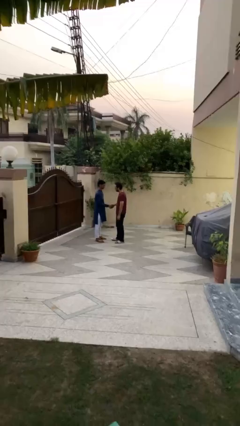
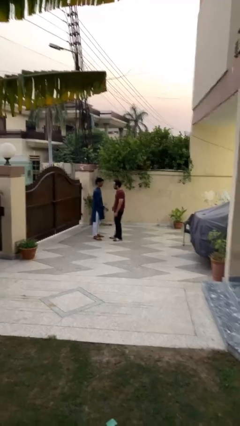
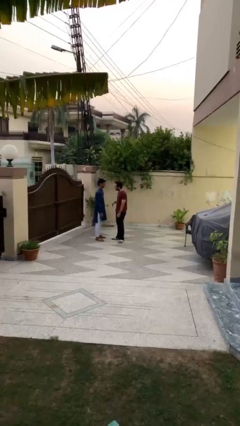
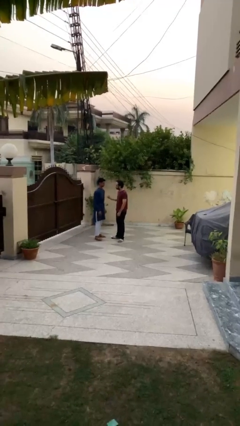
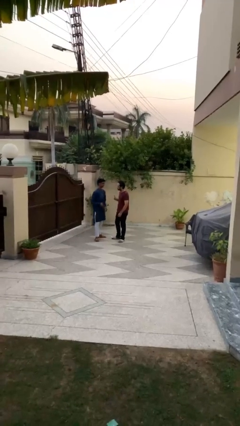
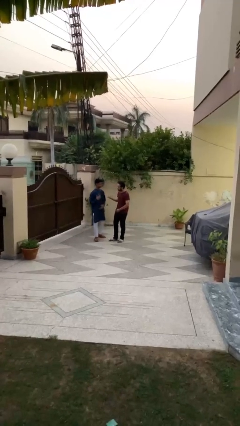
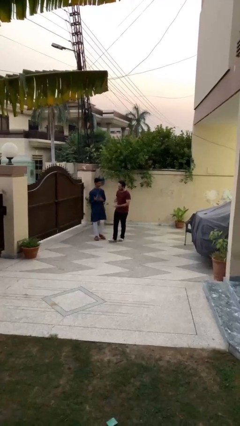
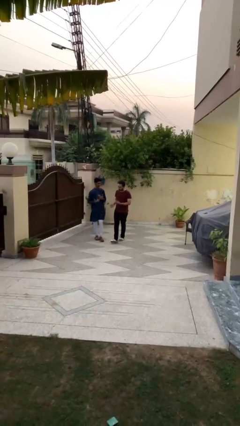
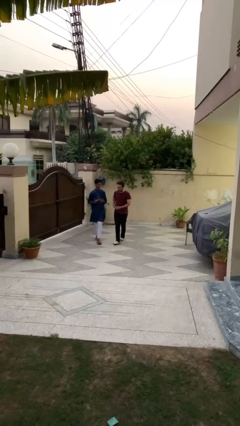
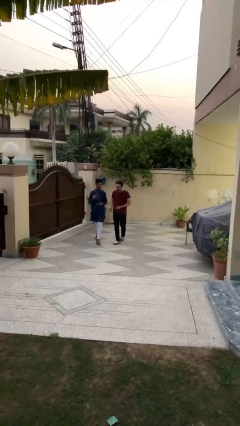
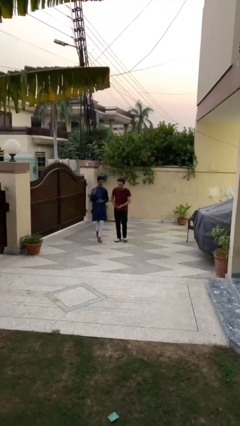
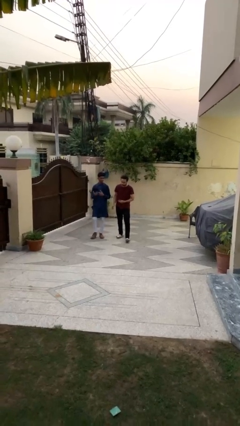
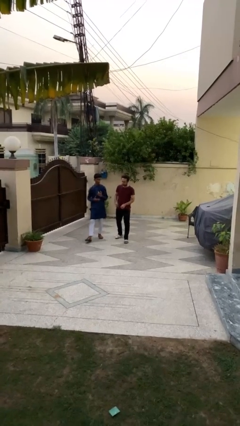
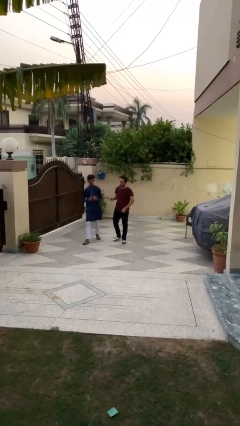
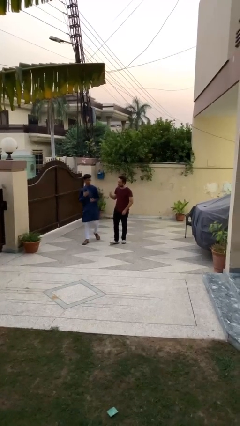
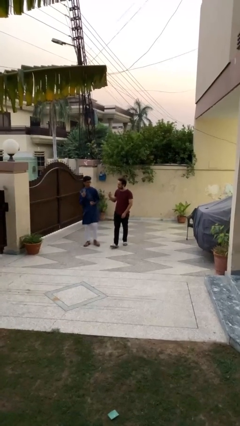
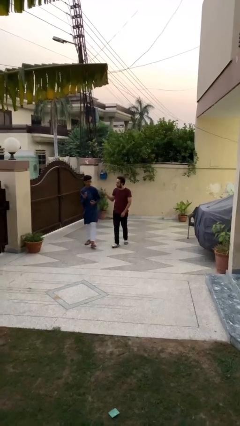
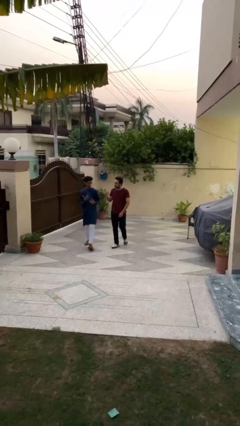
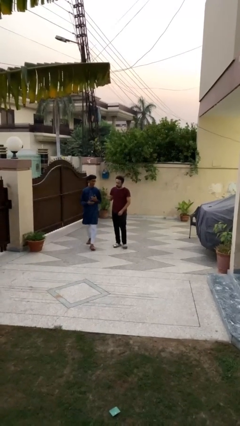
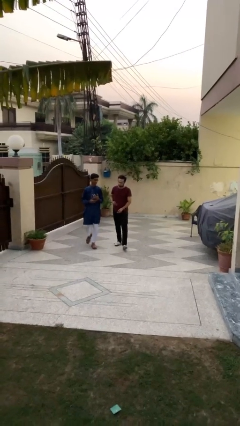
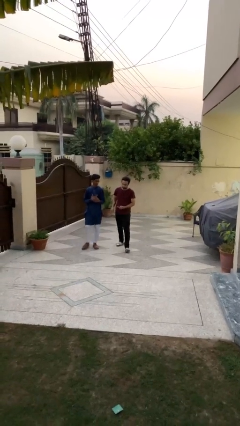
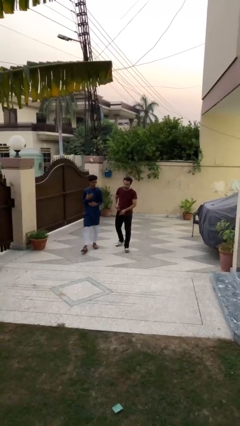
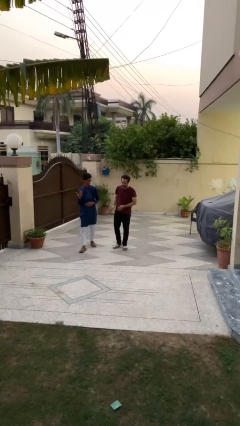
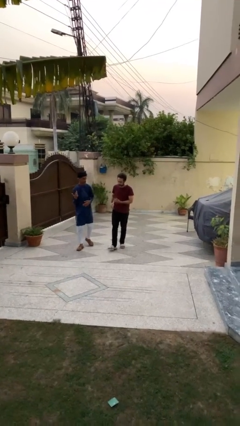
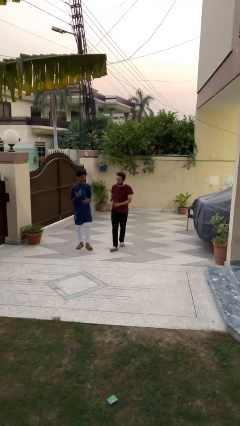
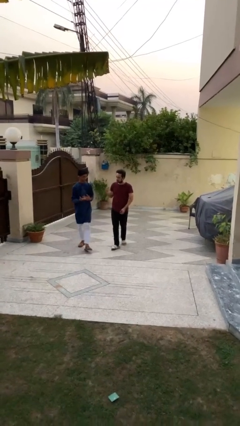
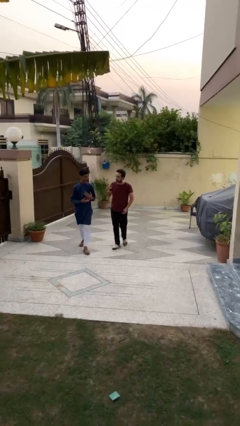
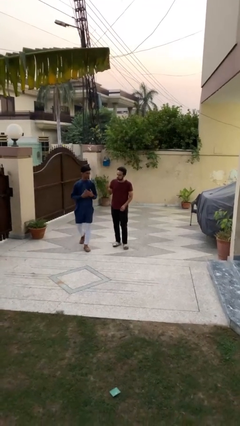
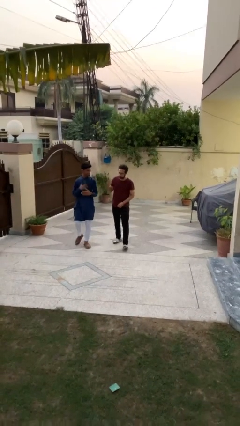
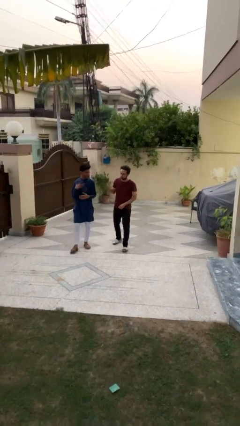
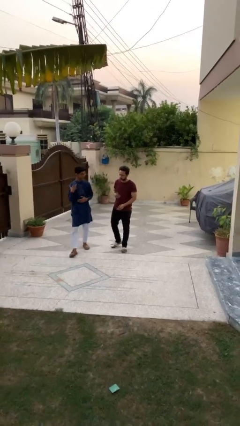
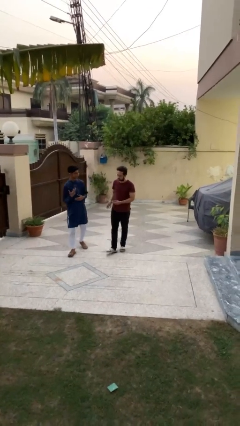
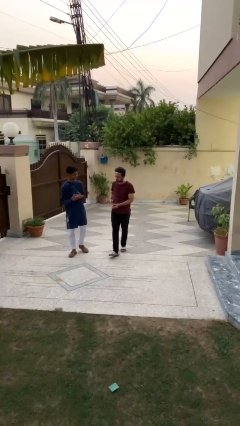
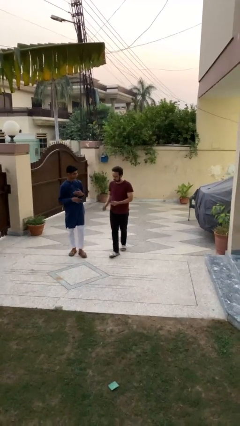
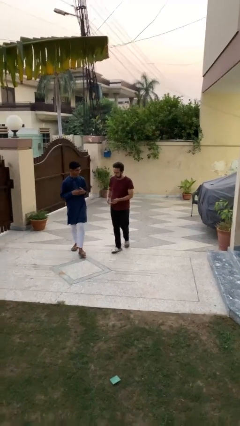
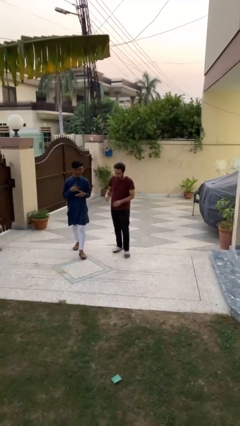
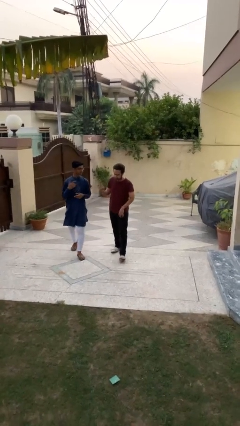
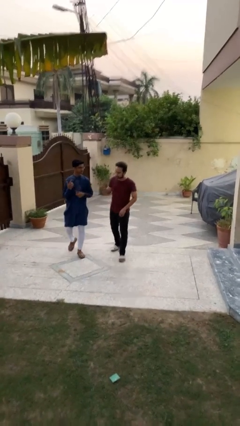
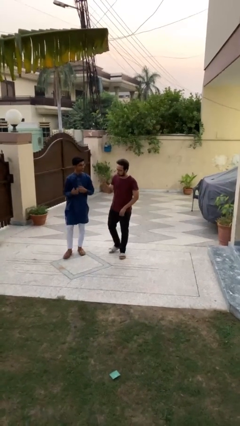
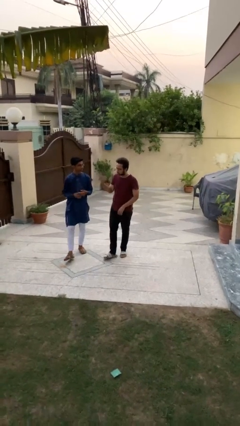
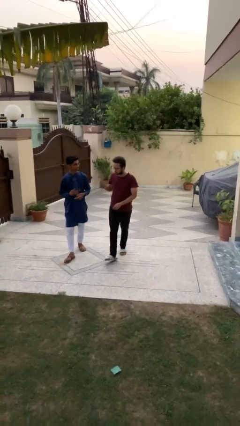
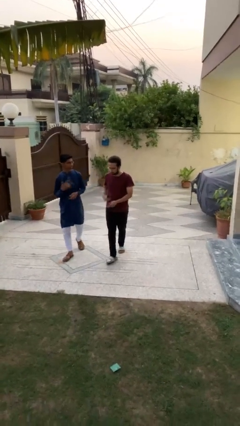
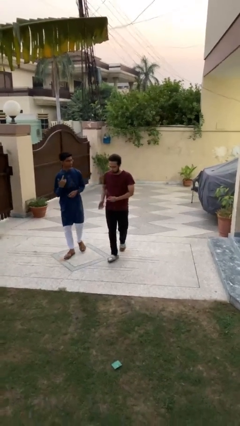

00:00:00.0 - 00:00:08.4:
person talks to person

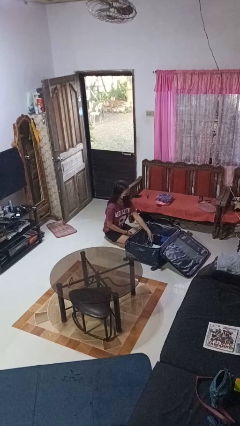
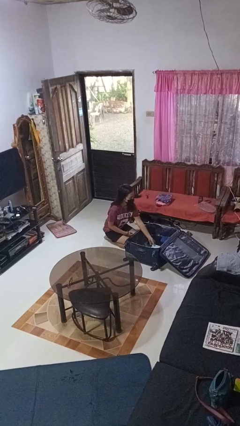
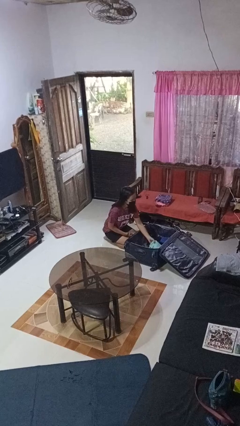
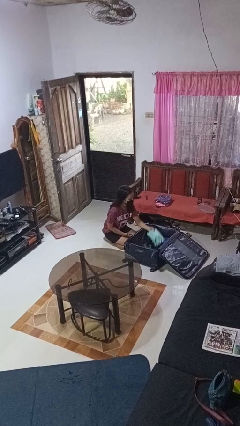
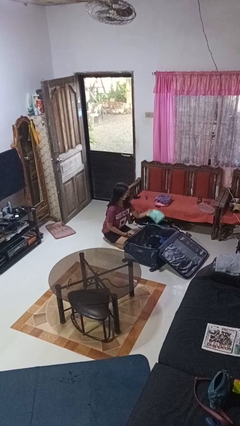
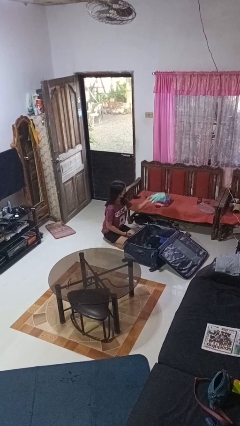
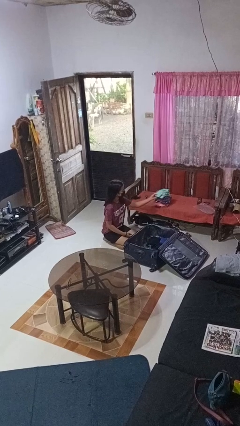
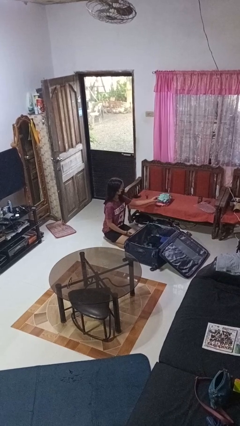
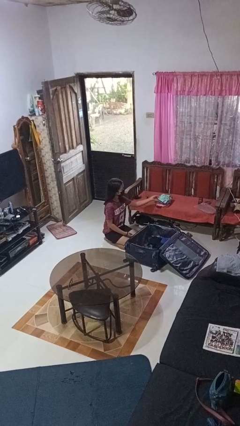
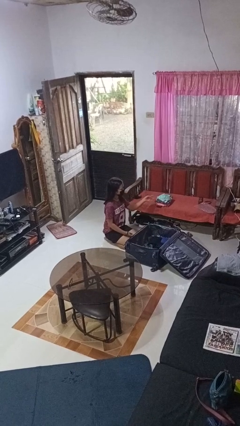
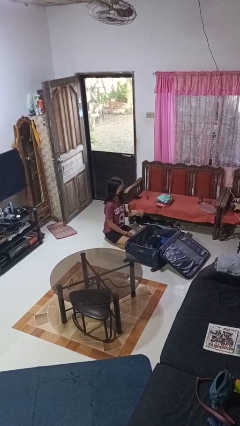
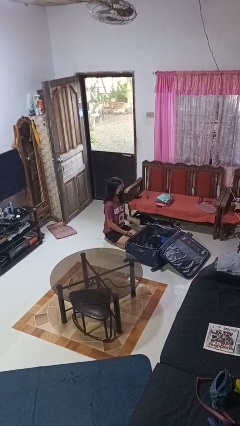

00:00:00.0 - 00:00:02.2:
person unloads clothes from suitcase

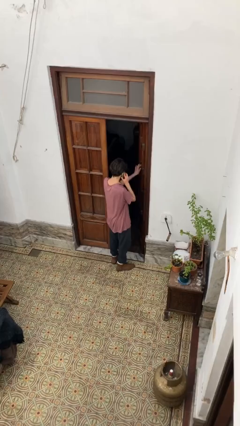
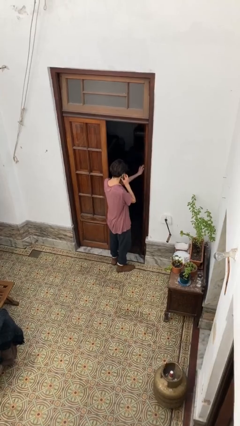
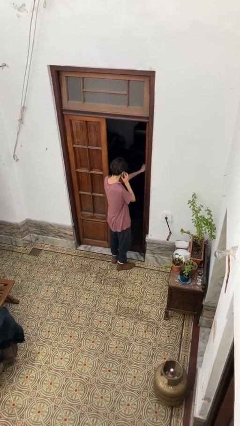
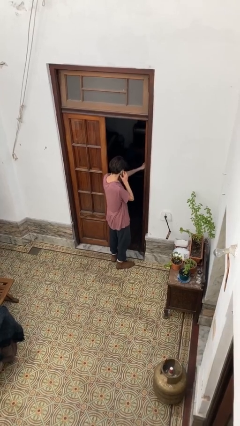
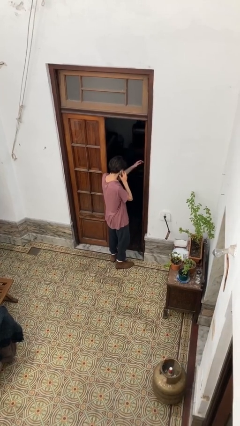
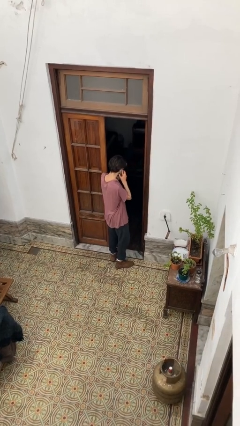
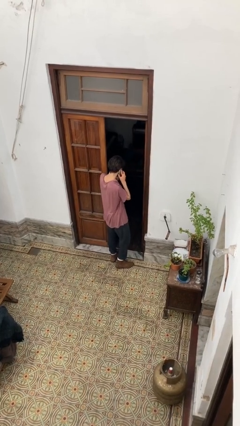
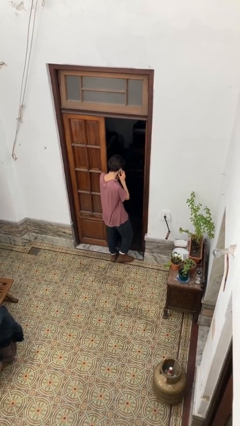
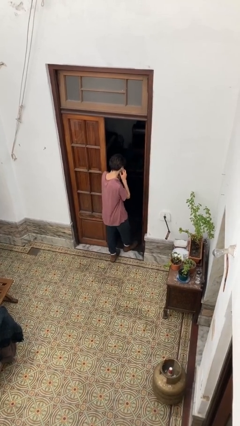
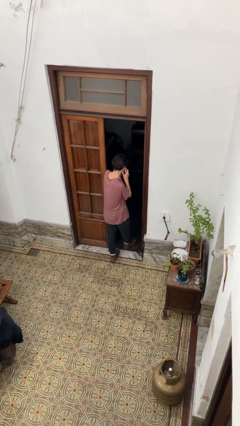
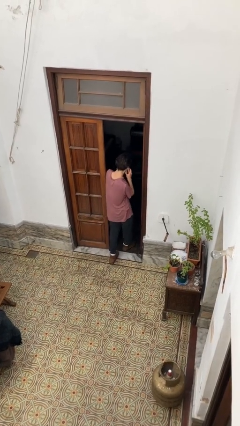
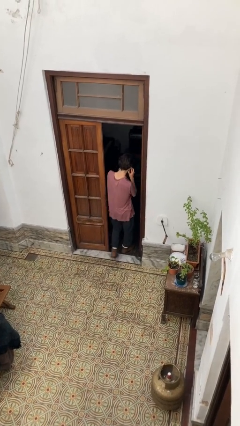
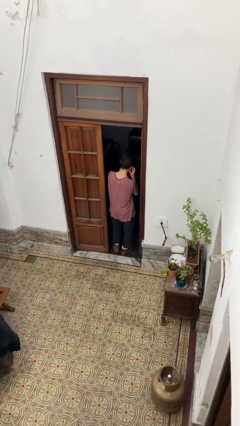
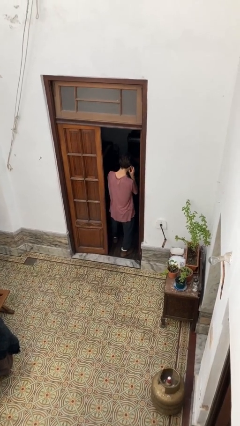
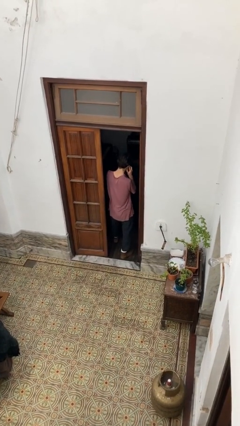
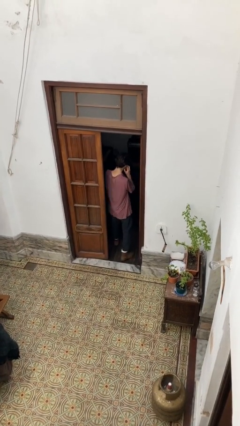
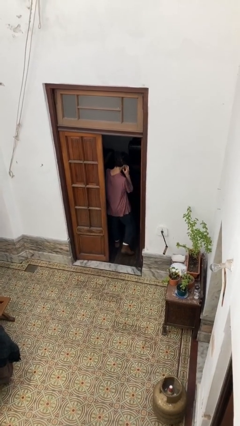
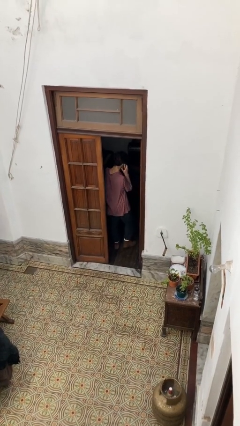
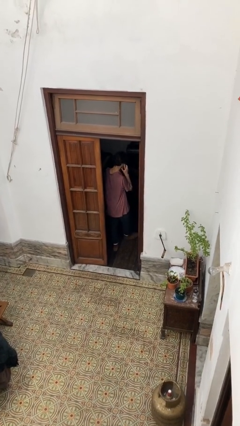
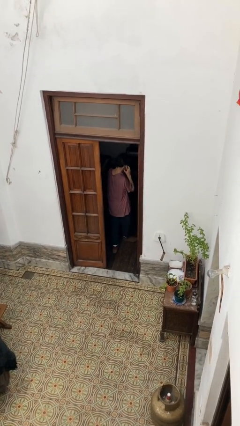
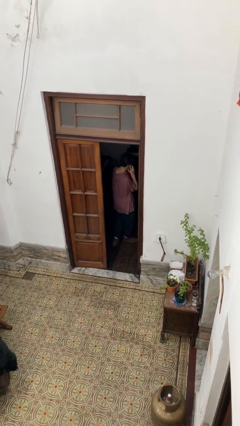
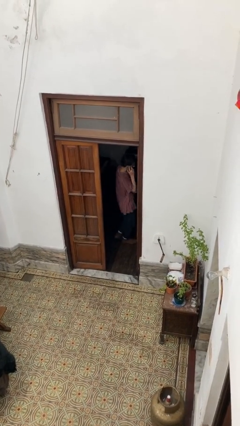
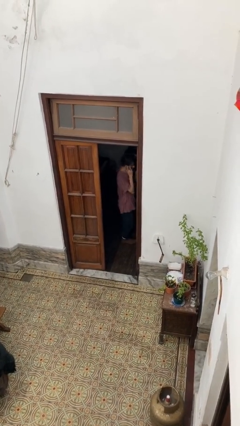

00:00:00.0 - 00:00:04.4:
person exits scene through structure

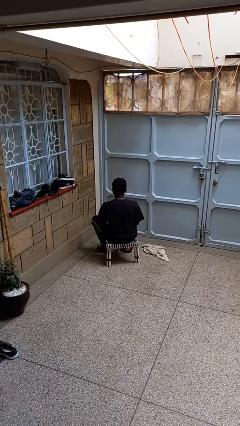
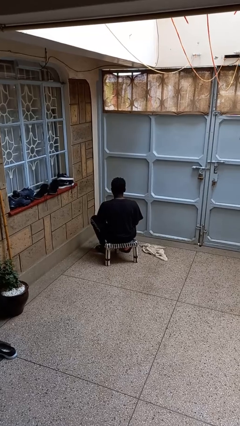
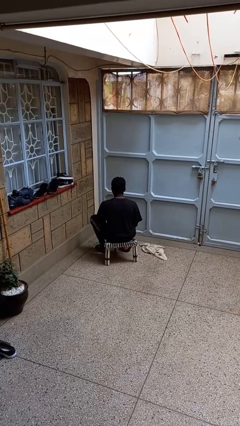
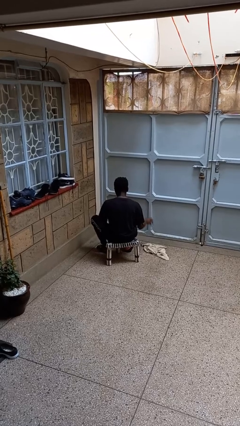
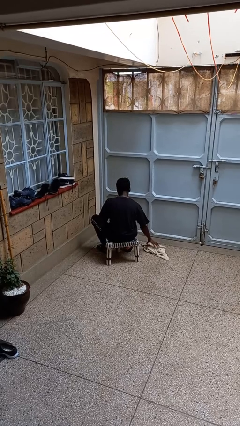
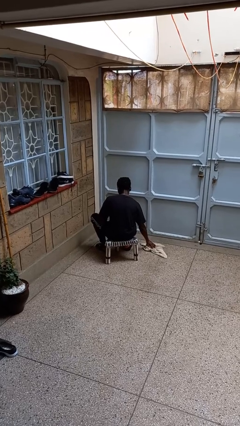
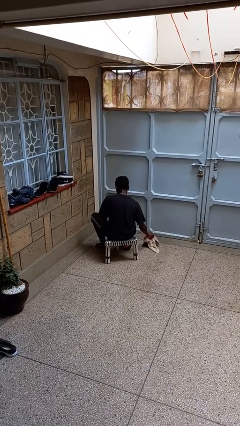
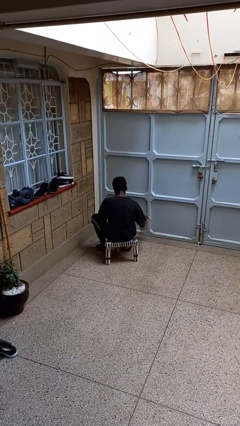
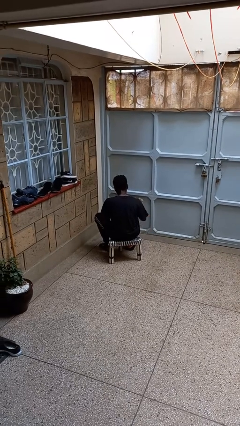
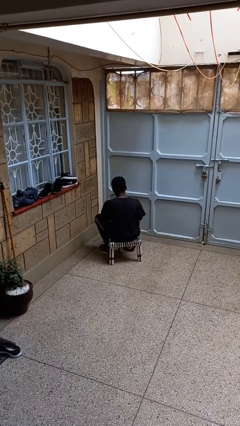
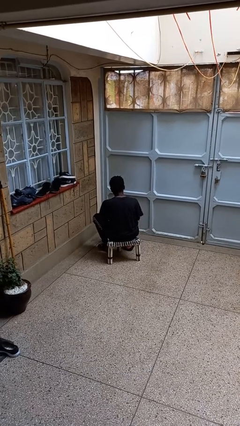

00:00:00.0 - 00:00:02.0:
person picks up object from floor

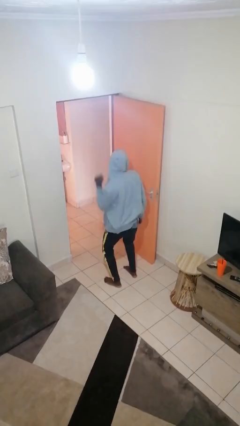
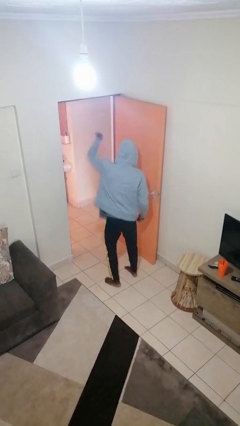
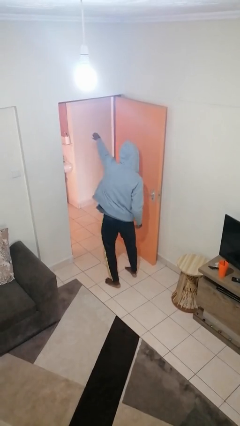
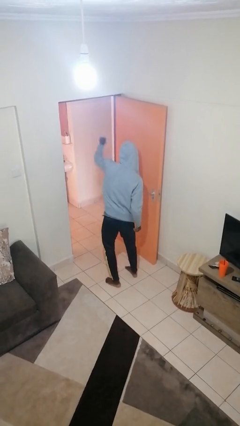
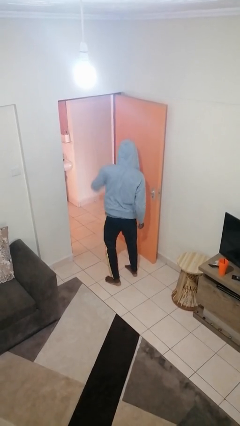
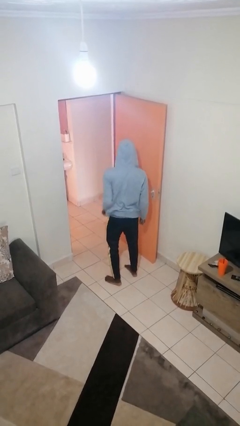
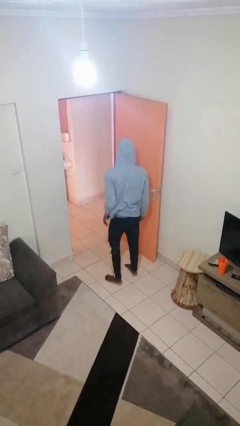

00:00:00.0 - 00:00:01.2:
person punches
